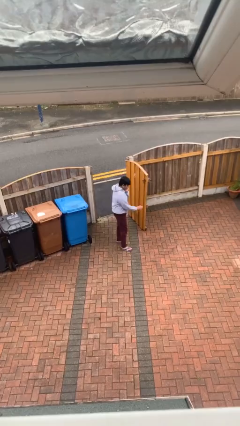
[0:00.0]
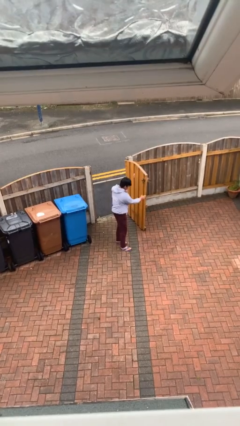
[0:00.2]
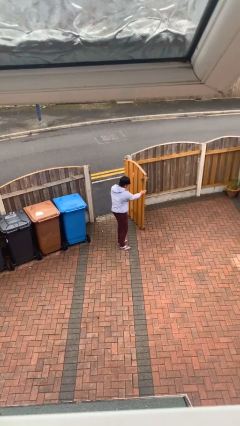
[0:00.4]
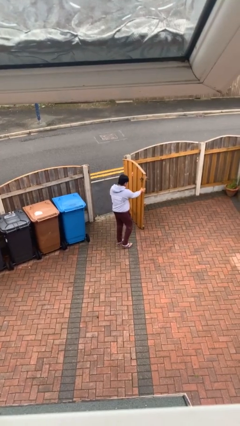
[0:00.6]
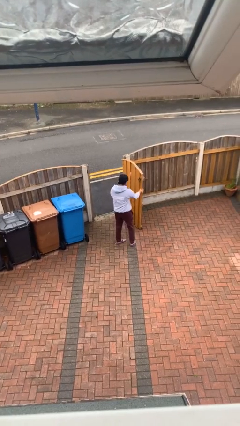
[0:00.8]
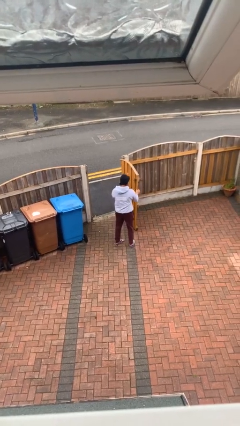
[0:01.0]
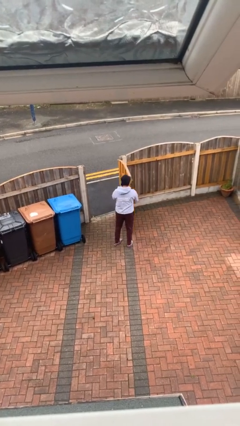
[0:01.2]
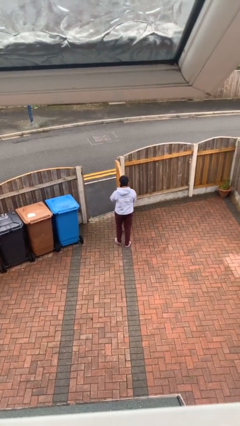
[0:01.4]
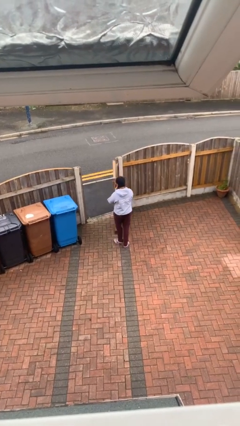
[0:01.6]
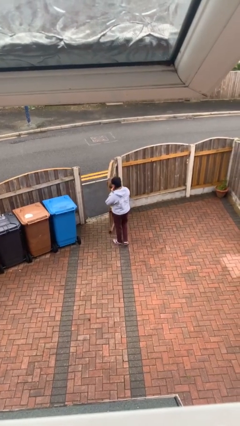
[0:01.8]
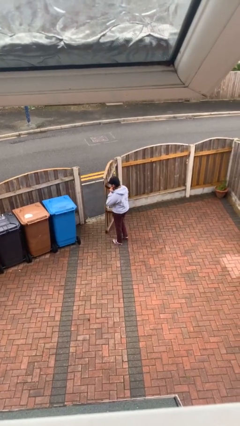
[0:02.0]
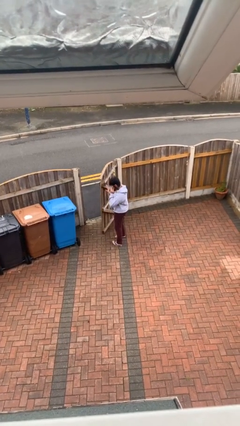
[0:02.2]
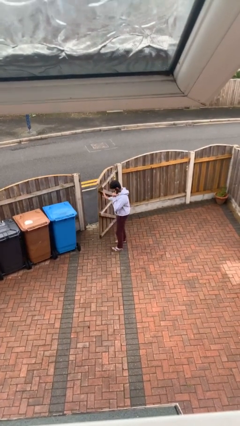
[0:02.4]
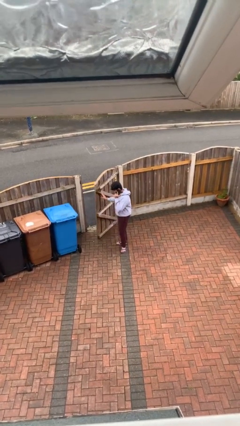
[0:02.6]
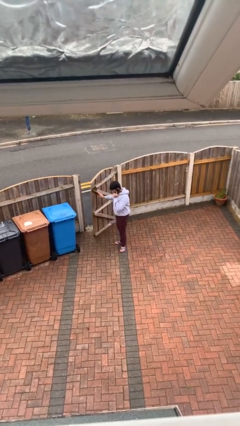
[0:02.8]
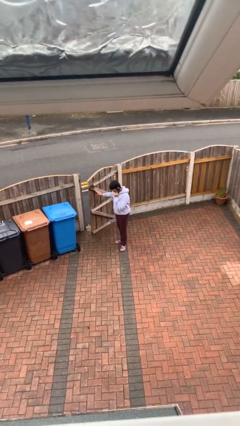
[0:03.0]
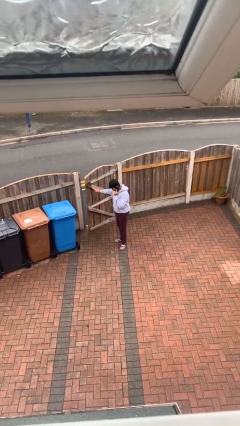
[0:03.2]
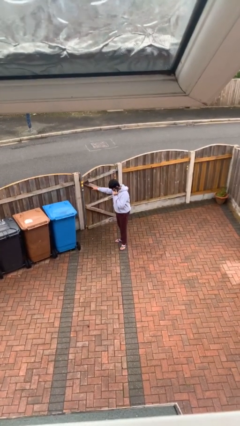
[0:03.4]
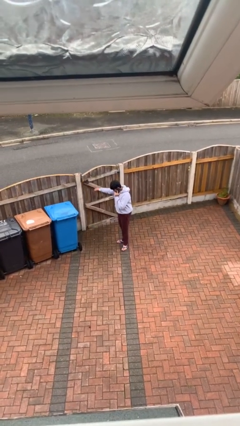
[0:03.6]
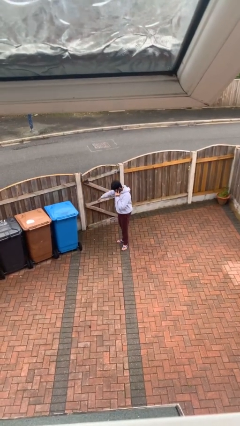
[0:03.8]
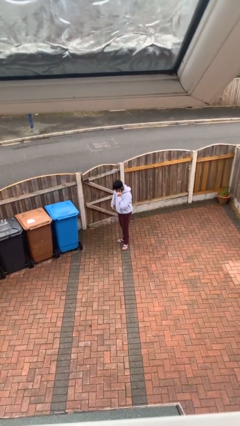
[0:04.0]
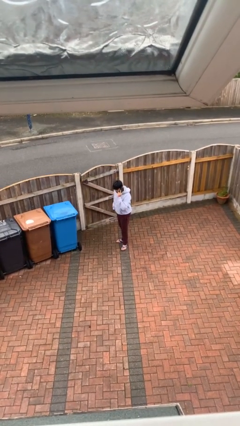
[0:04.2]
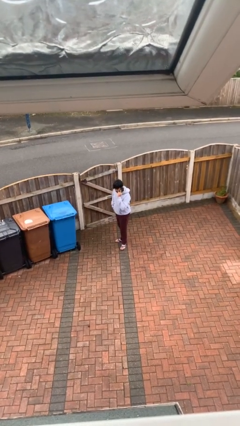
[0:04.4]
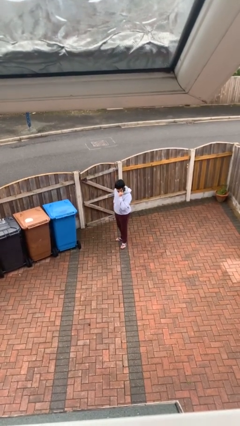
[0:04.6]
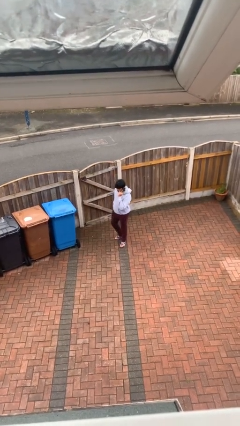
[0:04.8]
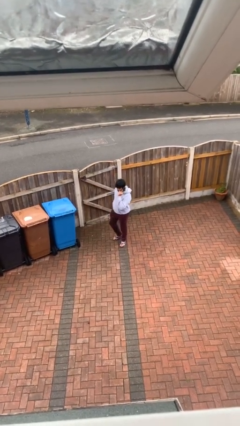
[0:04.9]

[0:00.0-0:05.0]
person closes facility door

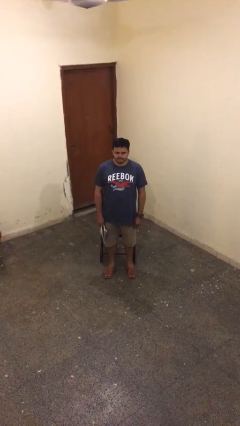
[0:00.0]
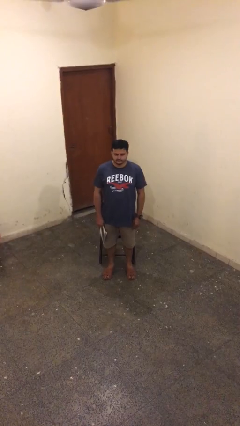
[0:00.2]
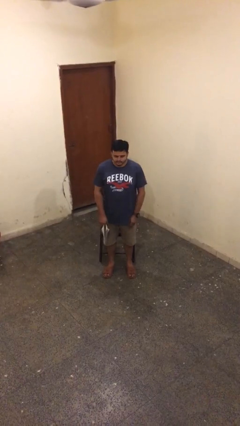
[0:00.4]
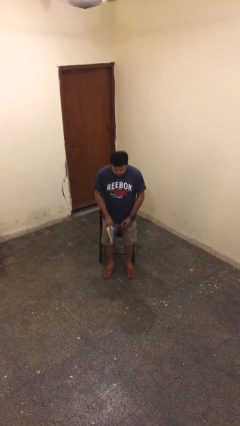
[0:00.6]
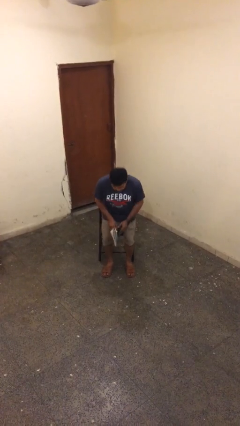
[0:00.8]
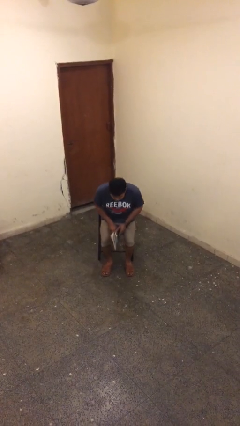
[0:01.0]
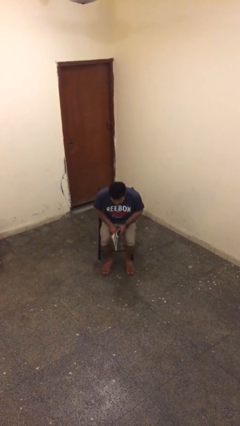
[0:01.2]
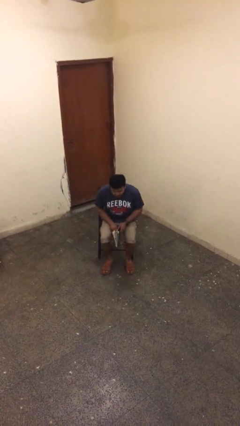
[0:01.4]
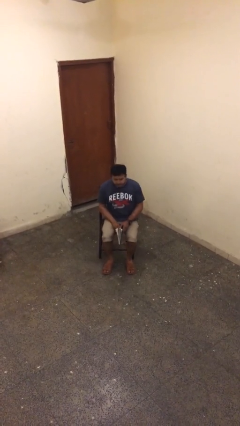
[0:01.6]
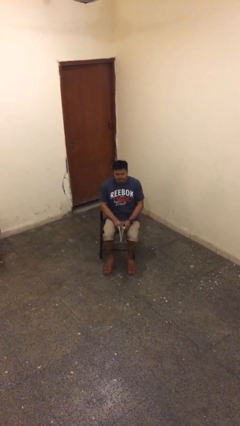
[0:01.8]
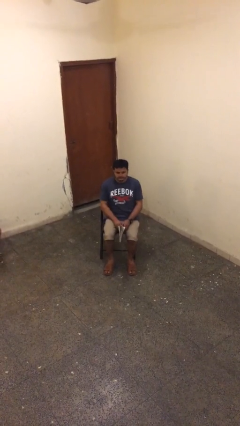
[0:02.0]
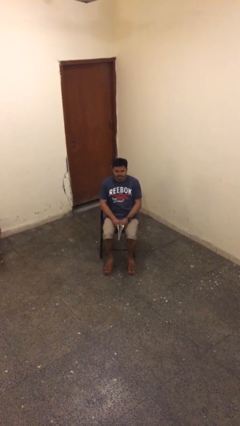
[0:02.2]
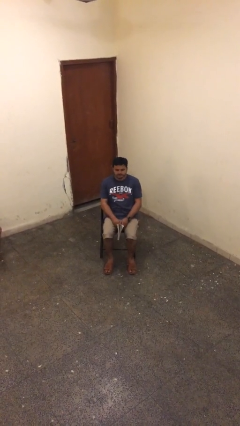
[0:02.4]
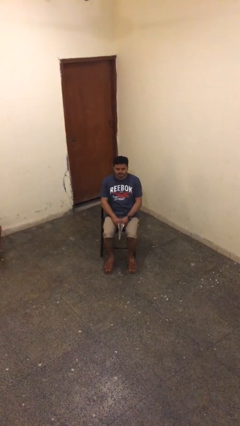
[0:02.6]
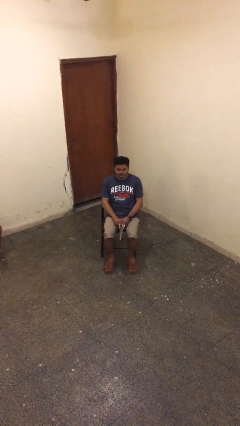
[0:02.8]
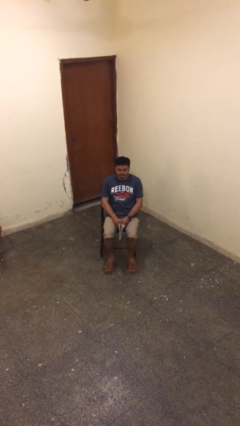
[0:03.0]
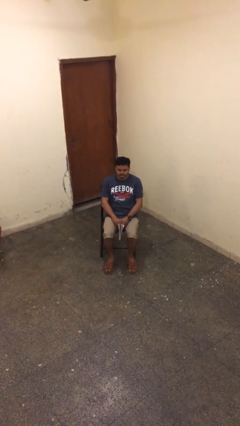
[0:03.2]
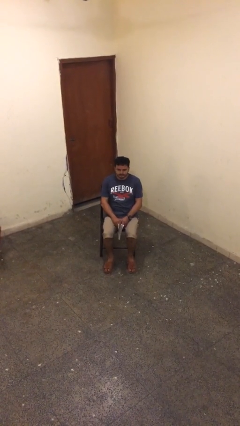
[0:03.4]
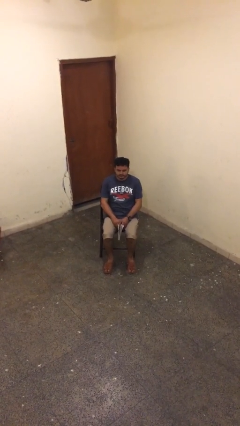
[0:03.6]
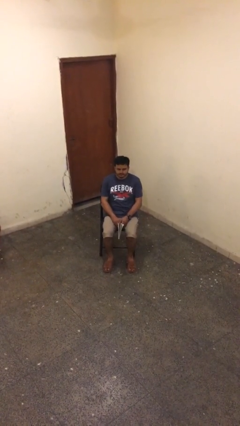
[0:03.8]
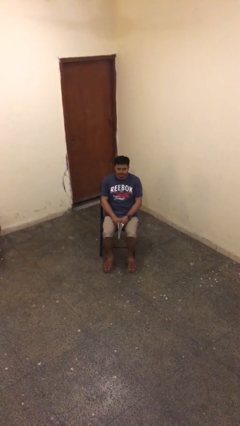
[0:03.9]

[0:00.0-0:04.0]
person sits down

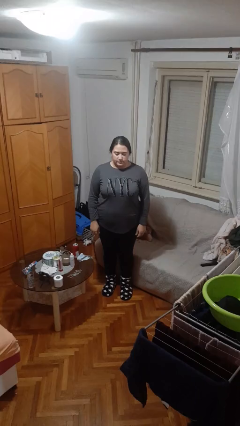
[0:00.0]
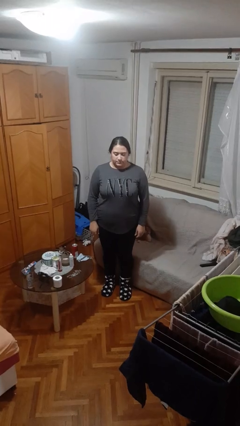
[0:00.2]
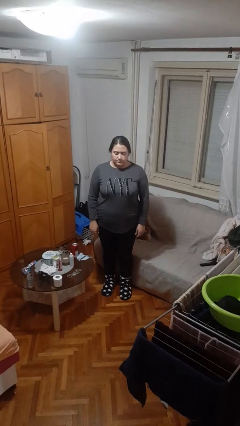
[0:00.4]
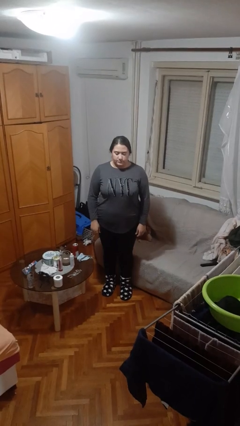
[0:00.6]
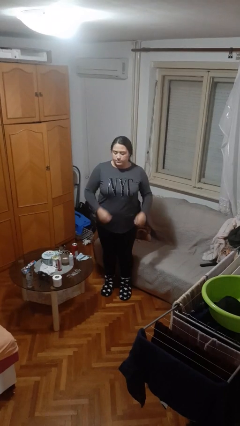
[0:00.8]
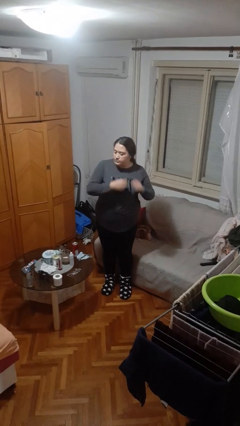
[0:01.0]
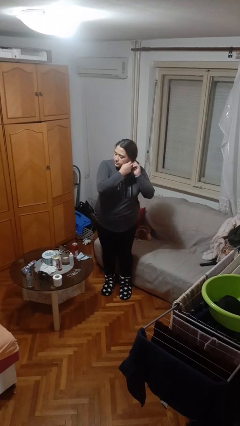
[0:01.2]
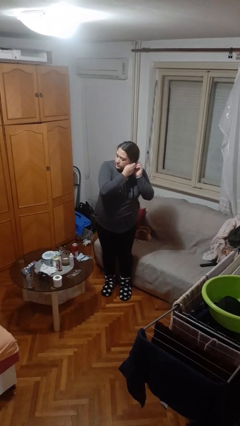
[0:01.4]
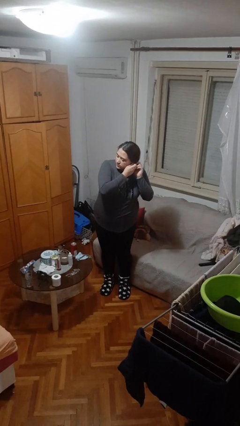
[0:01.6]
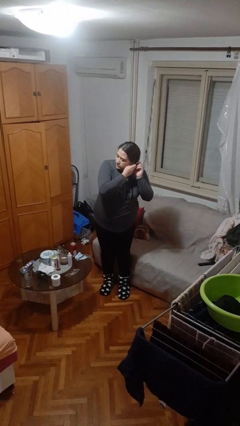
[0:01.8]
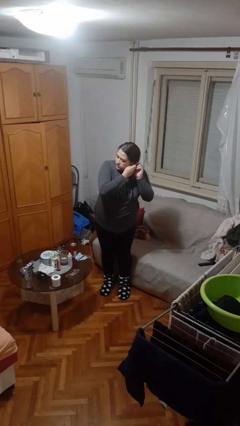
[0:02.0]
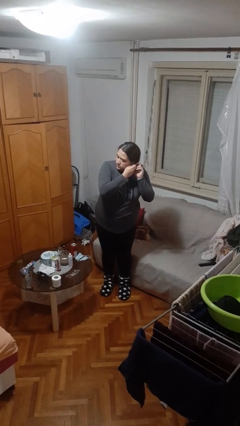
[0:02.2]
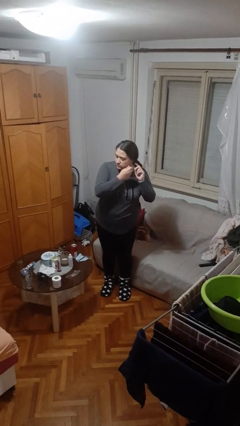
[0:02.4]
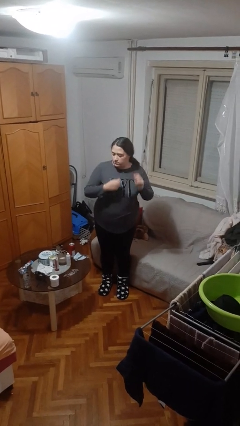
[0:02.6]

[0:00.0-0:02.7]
person puts on earrings

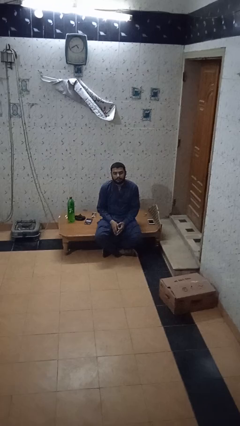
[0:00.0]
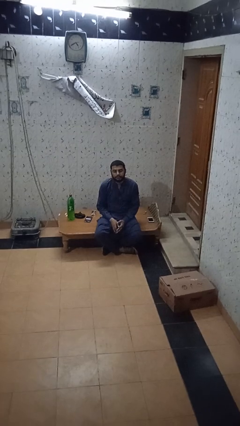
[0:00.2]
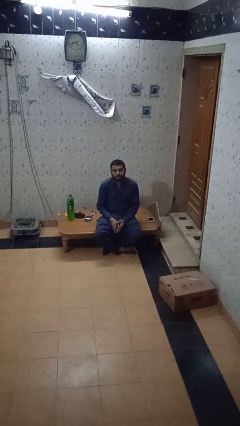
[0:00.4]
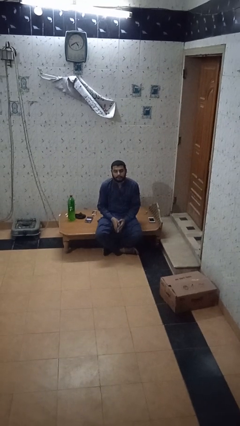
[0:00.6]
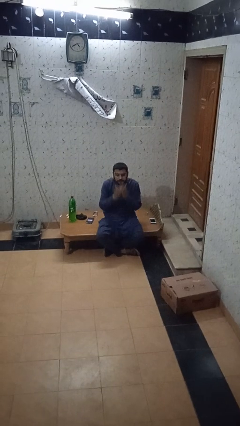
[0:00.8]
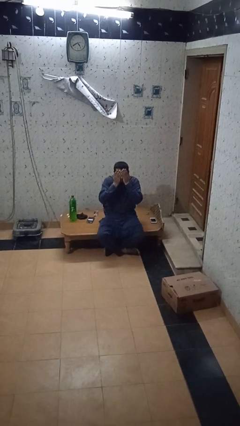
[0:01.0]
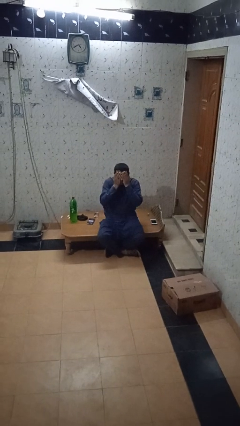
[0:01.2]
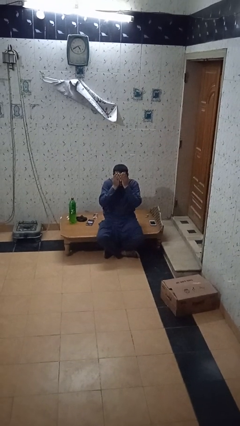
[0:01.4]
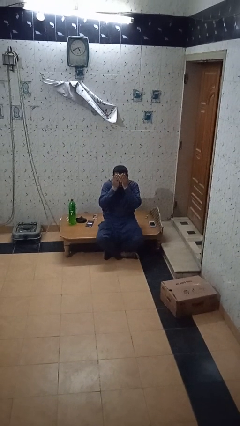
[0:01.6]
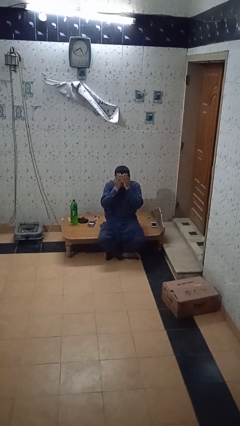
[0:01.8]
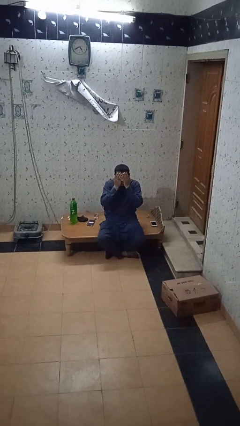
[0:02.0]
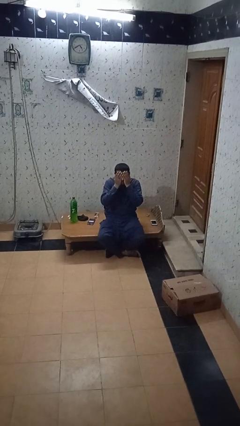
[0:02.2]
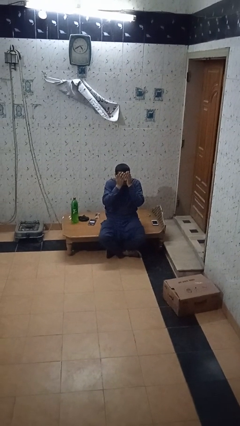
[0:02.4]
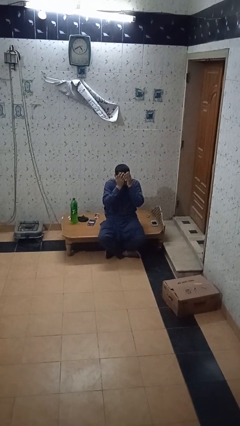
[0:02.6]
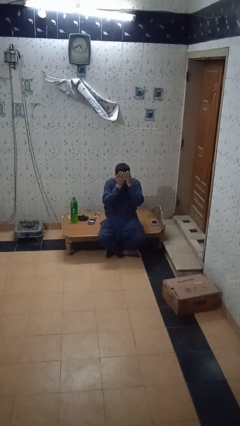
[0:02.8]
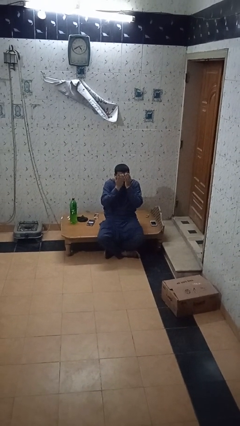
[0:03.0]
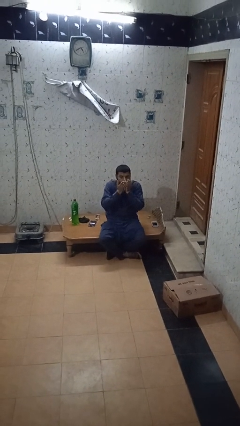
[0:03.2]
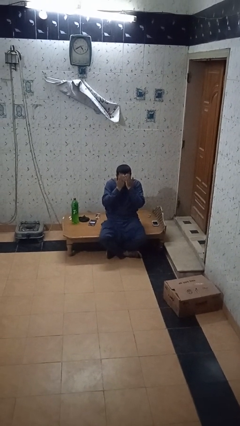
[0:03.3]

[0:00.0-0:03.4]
person covers face with hands

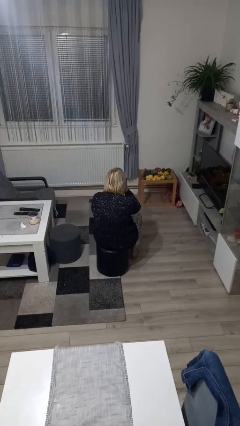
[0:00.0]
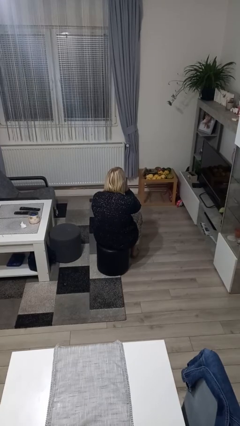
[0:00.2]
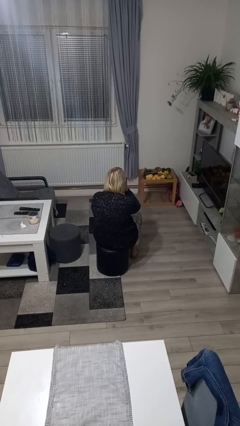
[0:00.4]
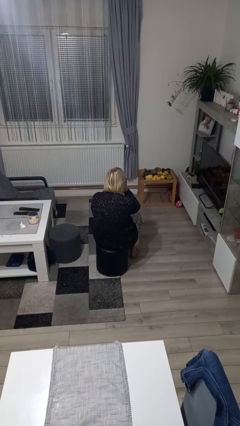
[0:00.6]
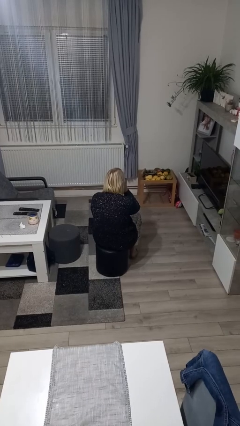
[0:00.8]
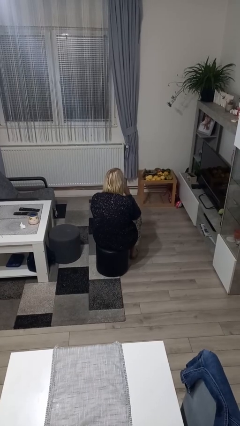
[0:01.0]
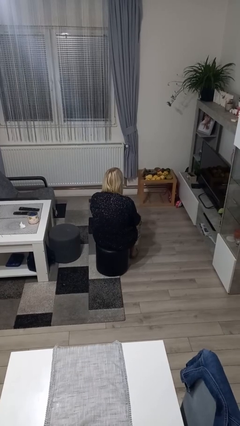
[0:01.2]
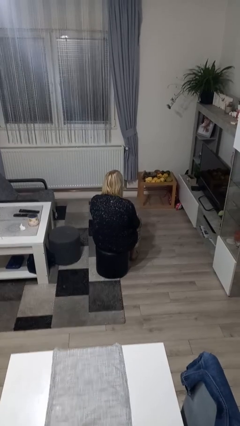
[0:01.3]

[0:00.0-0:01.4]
person gestures be quiet

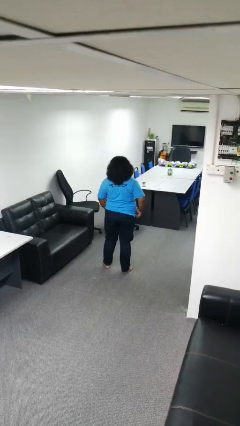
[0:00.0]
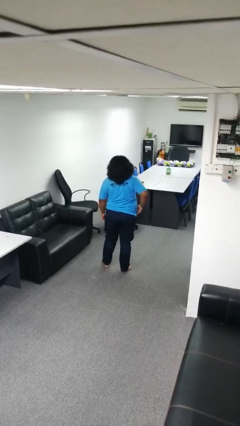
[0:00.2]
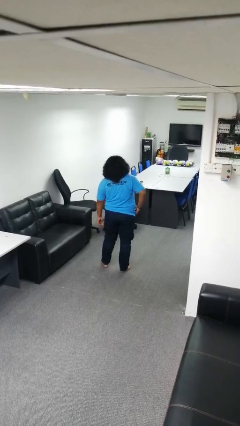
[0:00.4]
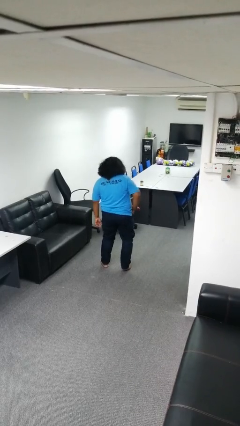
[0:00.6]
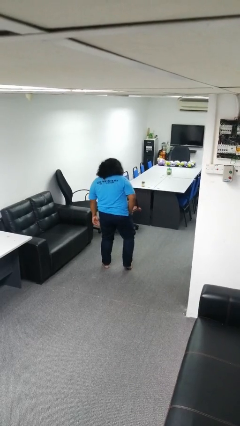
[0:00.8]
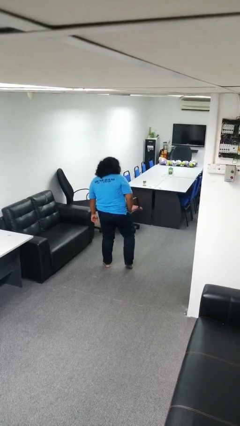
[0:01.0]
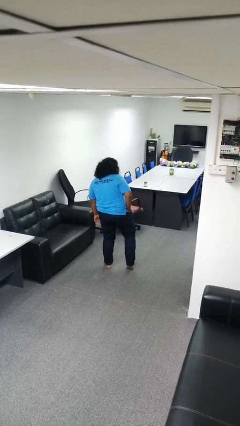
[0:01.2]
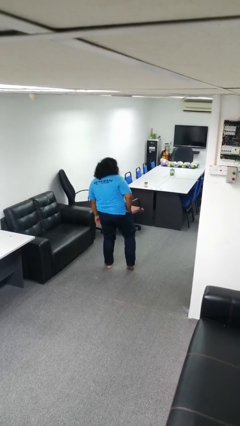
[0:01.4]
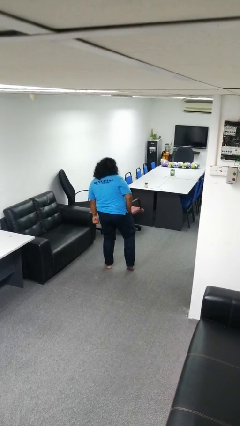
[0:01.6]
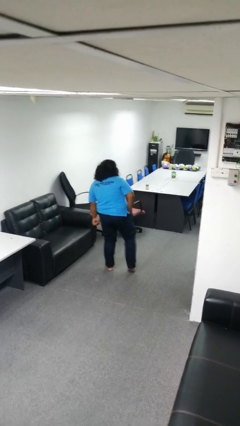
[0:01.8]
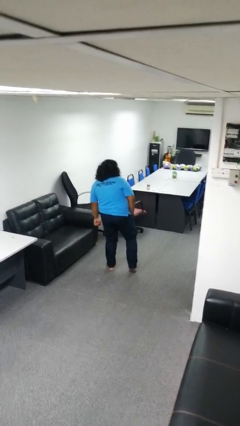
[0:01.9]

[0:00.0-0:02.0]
person puts hands in back pockets
